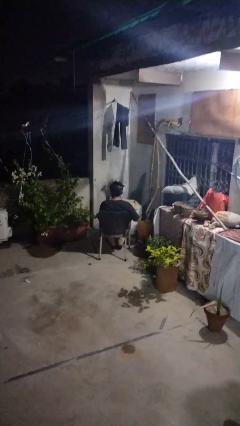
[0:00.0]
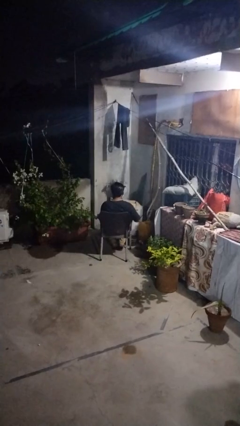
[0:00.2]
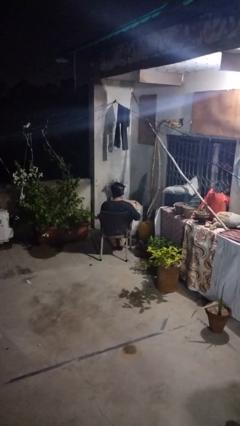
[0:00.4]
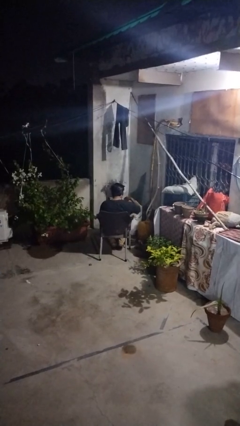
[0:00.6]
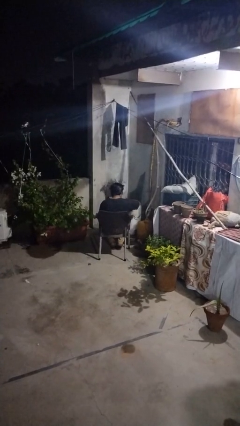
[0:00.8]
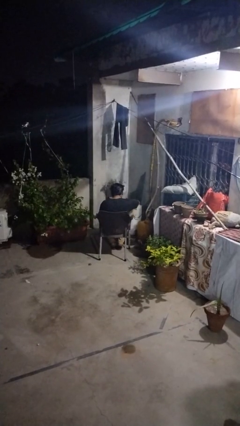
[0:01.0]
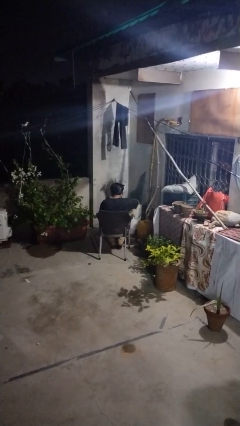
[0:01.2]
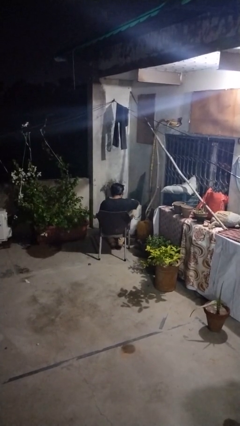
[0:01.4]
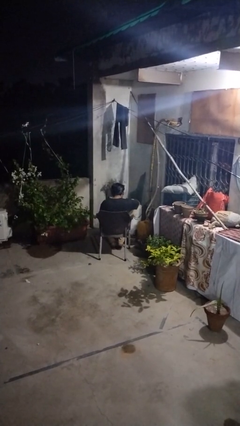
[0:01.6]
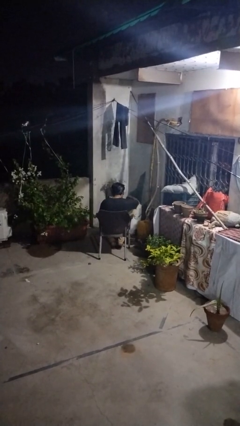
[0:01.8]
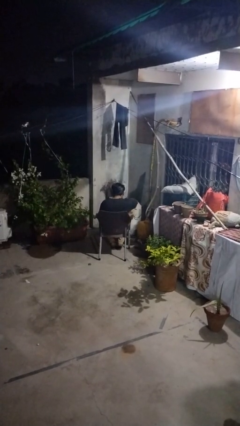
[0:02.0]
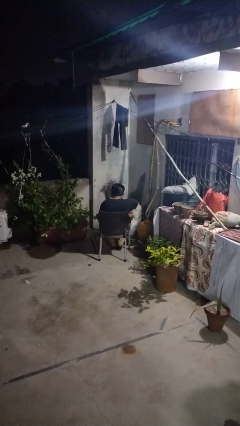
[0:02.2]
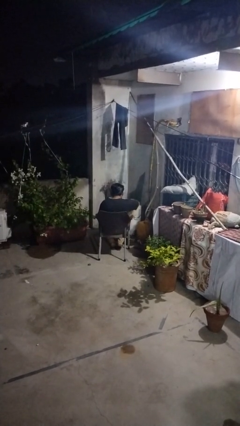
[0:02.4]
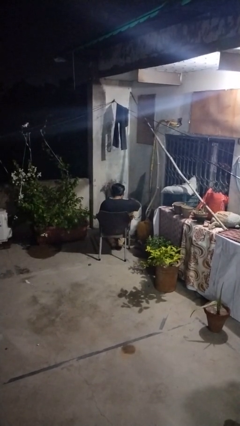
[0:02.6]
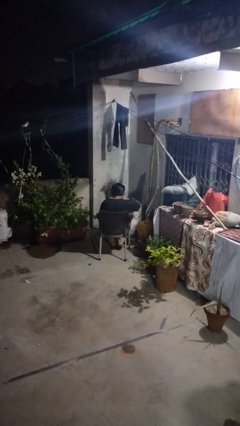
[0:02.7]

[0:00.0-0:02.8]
person searches in box

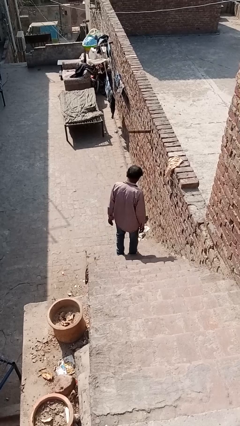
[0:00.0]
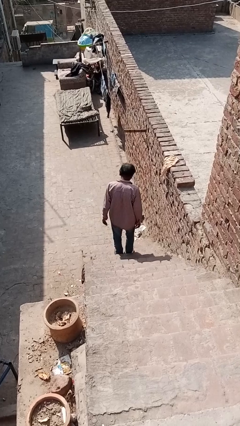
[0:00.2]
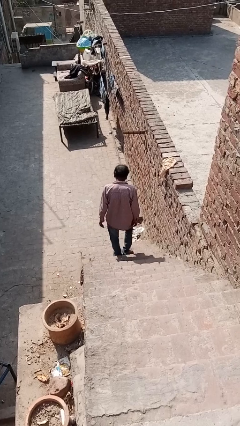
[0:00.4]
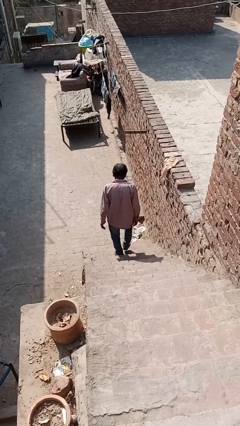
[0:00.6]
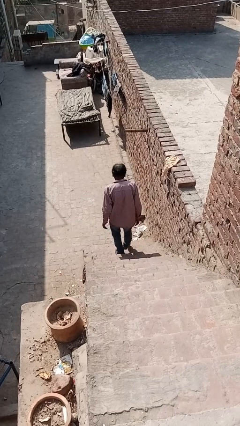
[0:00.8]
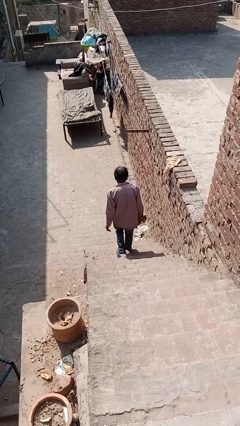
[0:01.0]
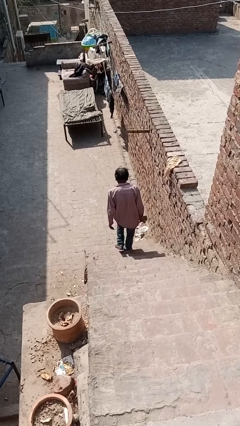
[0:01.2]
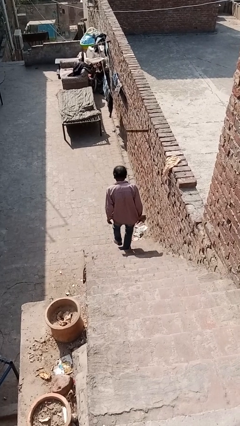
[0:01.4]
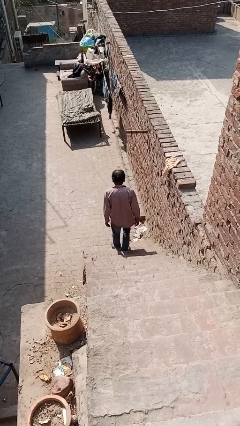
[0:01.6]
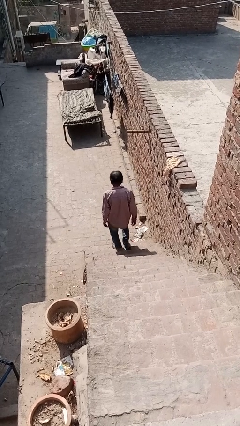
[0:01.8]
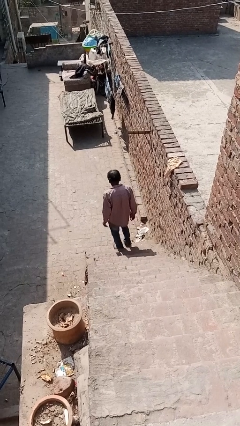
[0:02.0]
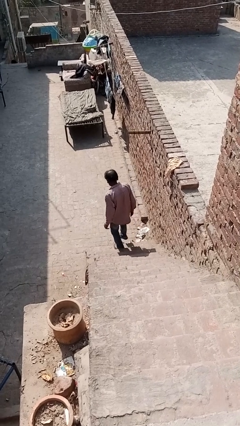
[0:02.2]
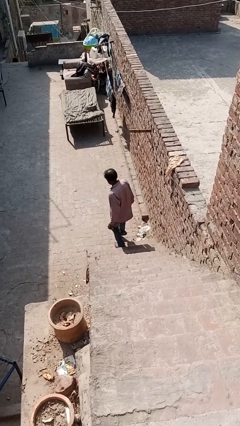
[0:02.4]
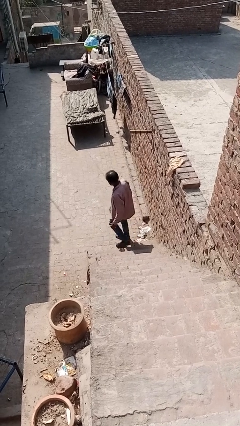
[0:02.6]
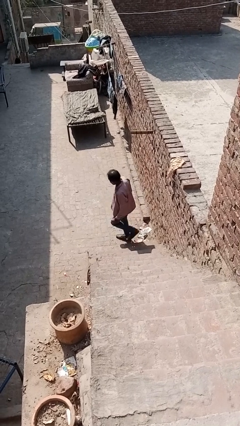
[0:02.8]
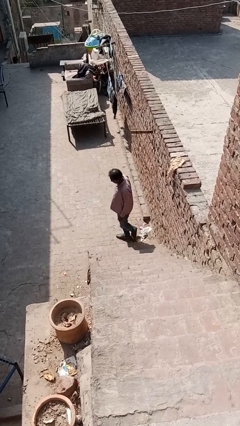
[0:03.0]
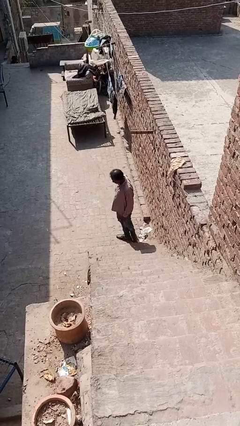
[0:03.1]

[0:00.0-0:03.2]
person climbs down stairs

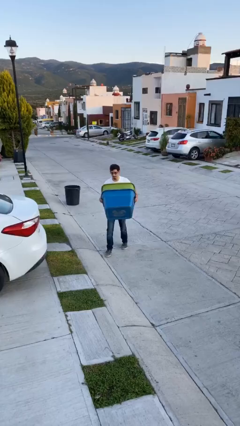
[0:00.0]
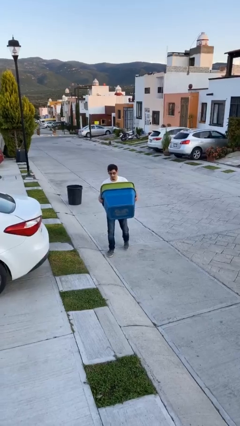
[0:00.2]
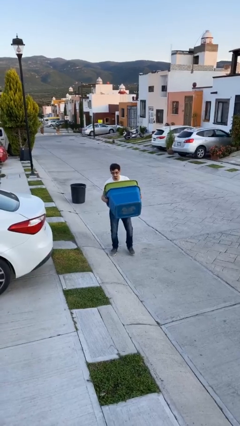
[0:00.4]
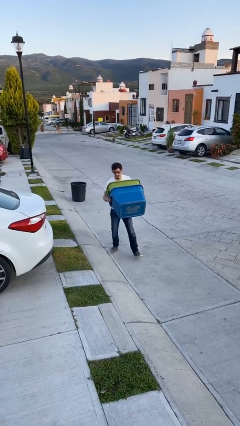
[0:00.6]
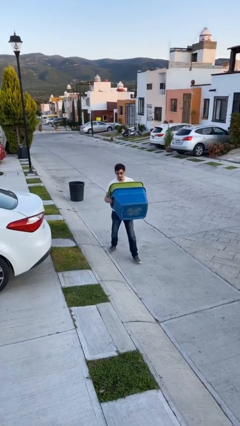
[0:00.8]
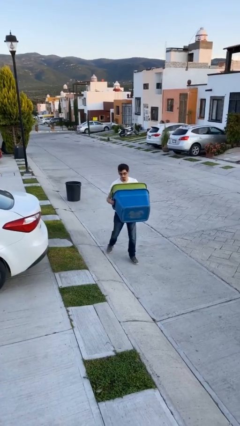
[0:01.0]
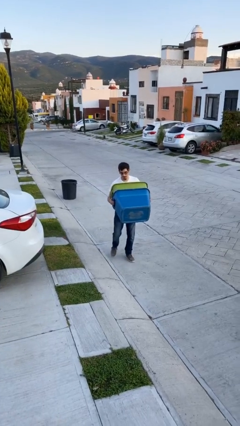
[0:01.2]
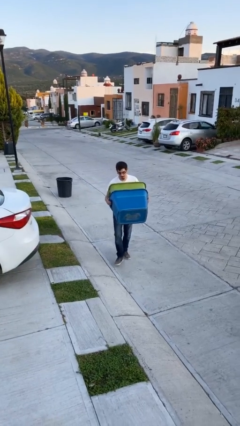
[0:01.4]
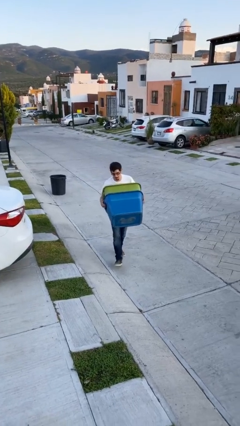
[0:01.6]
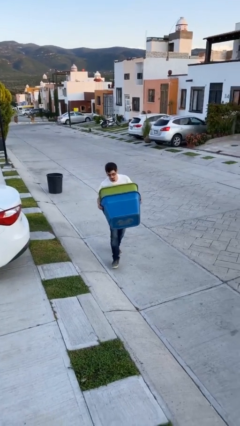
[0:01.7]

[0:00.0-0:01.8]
person carries heavy object

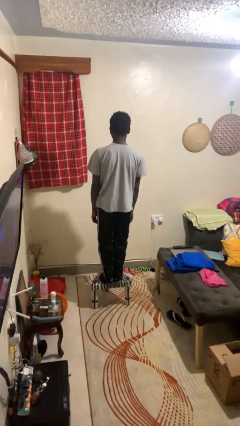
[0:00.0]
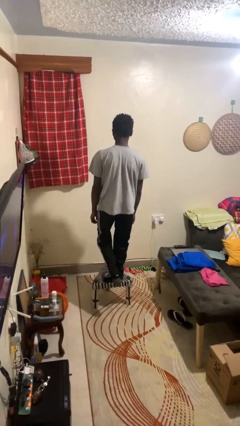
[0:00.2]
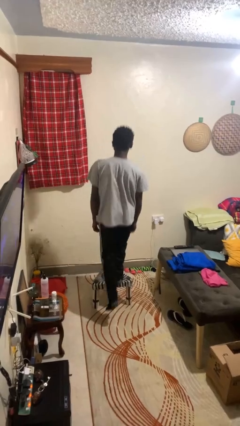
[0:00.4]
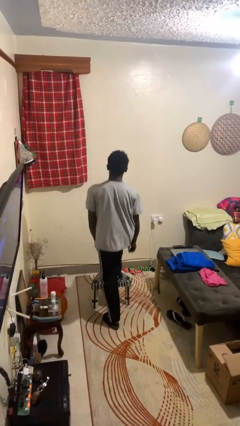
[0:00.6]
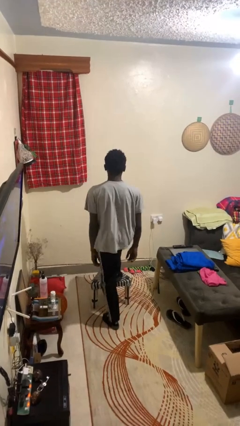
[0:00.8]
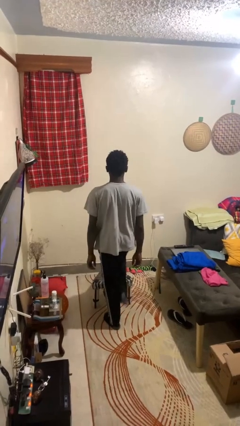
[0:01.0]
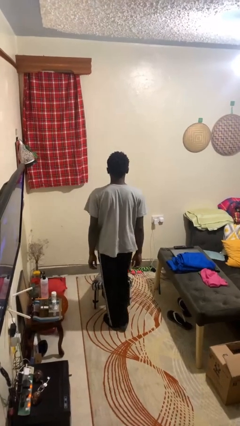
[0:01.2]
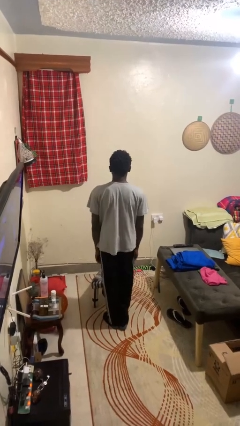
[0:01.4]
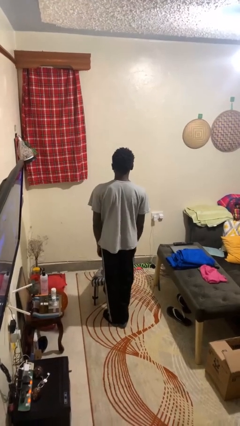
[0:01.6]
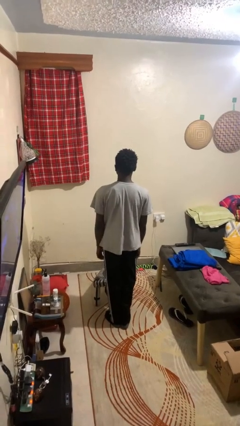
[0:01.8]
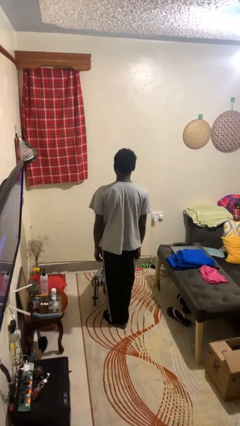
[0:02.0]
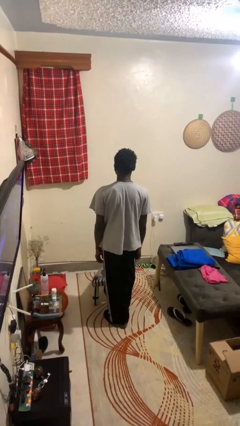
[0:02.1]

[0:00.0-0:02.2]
person climbs off chair

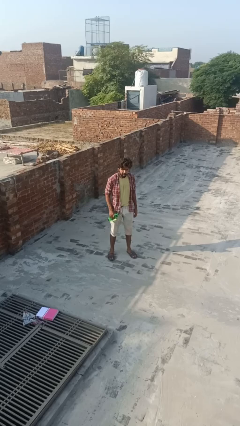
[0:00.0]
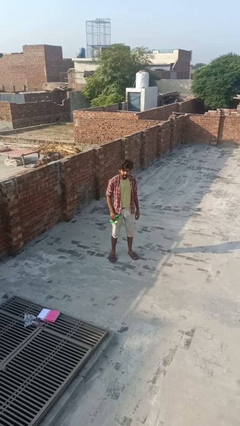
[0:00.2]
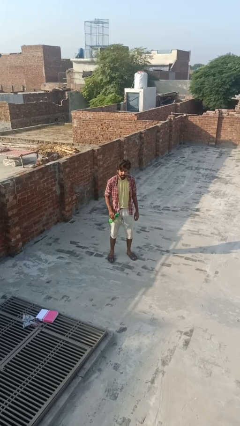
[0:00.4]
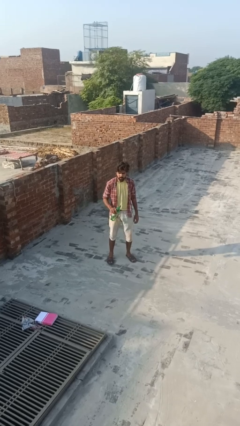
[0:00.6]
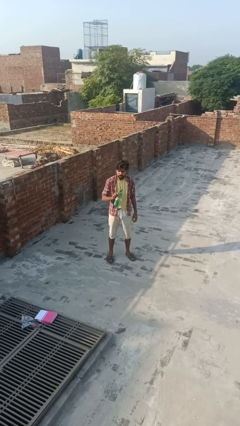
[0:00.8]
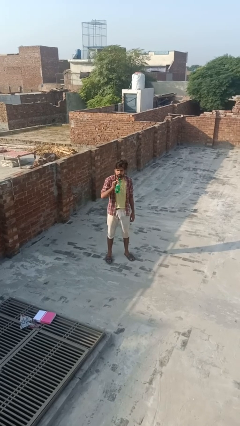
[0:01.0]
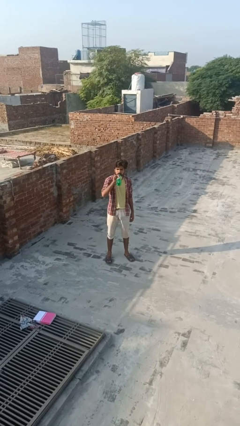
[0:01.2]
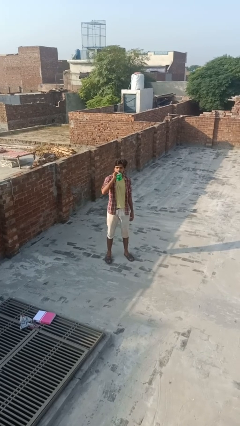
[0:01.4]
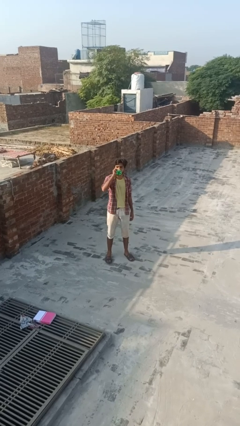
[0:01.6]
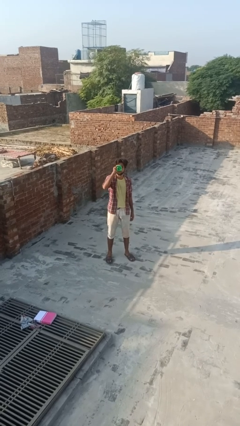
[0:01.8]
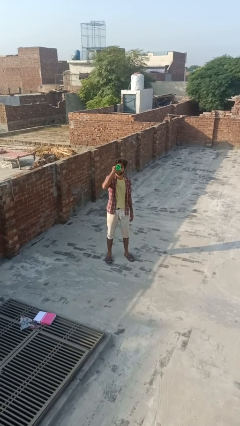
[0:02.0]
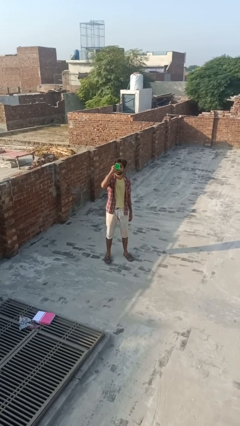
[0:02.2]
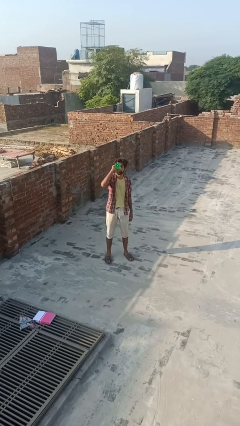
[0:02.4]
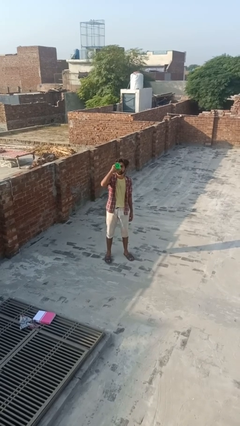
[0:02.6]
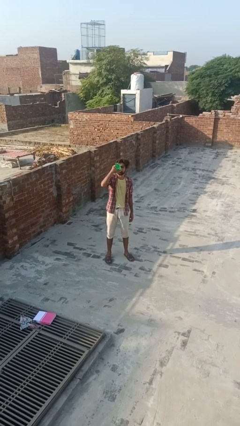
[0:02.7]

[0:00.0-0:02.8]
person drinks from bottle

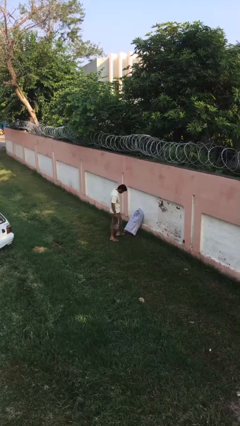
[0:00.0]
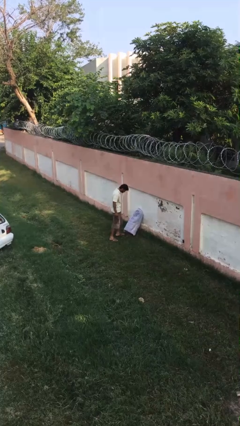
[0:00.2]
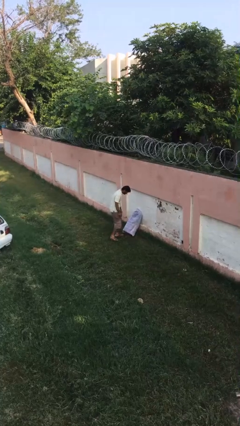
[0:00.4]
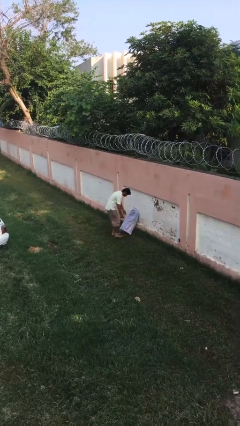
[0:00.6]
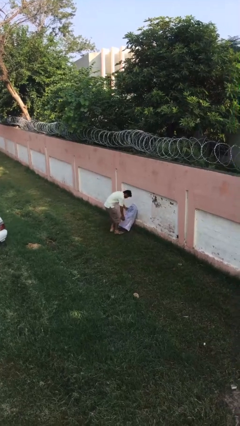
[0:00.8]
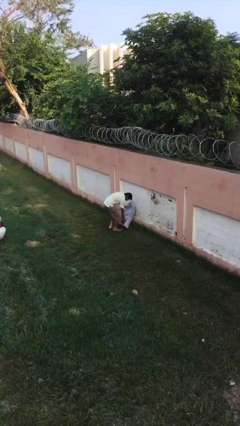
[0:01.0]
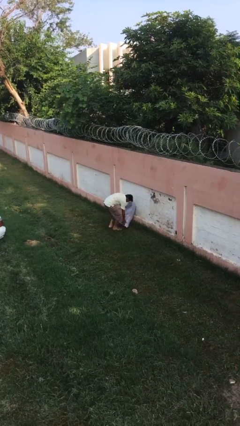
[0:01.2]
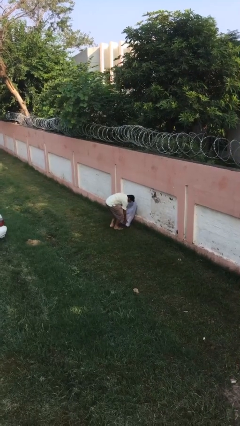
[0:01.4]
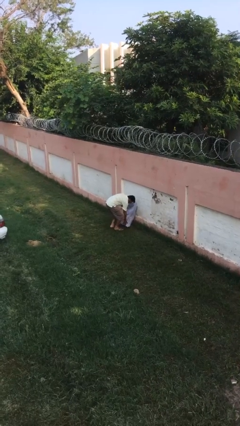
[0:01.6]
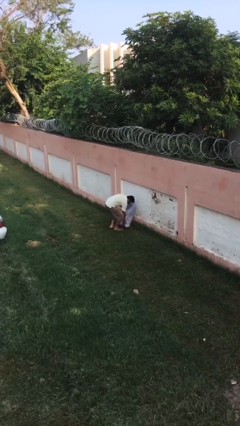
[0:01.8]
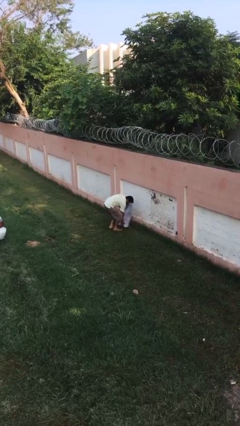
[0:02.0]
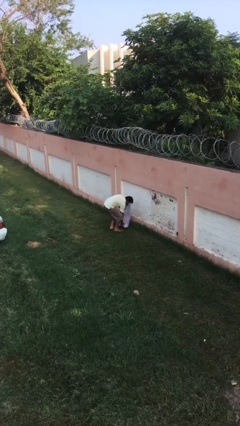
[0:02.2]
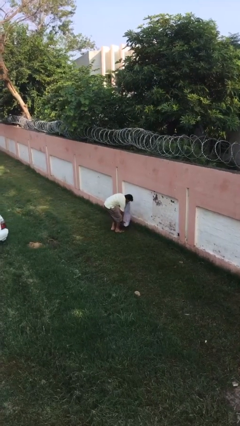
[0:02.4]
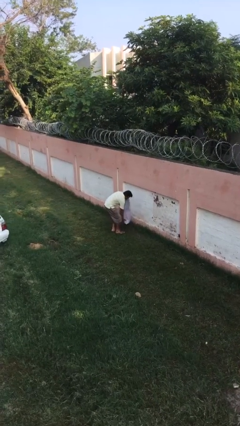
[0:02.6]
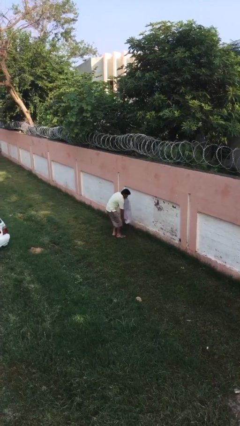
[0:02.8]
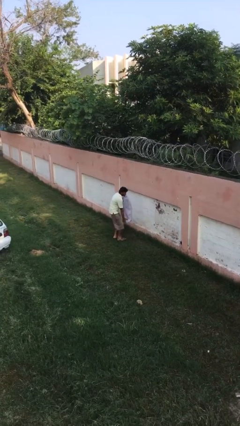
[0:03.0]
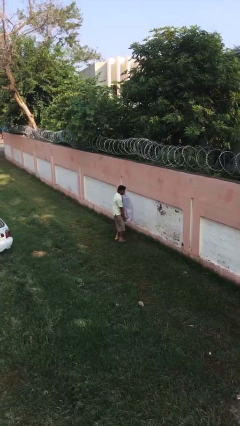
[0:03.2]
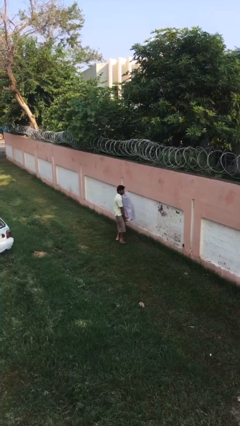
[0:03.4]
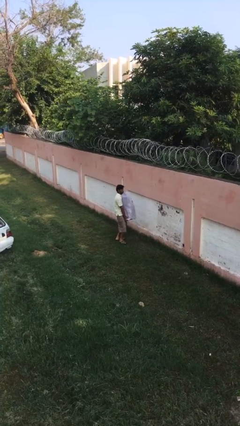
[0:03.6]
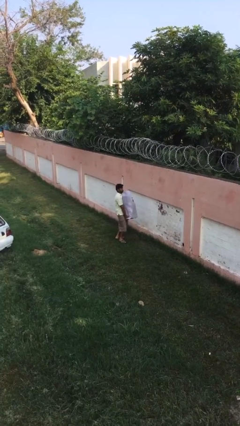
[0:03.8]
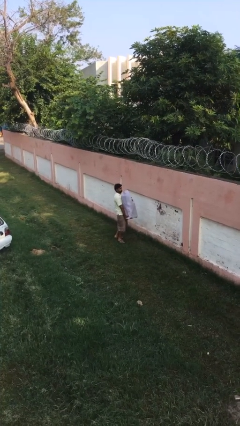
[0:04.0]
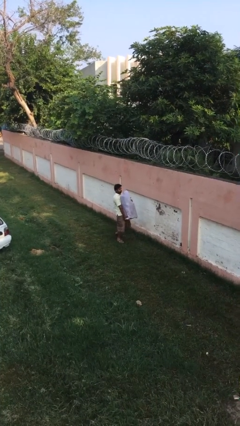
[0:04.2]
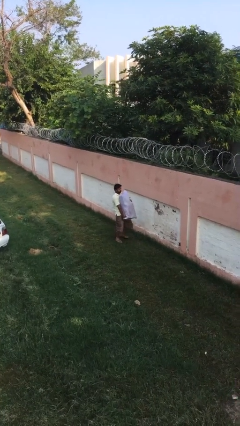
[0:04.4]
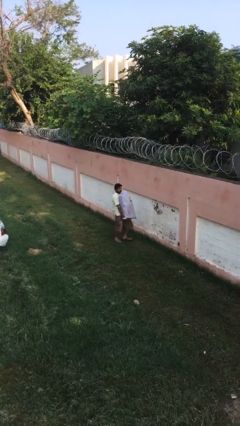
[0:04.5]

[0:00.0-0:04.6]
person picks up object from floor
